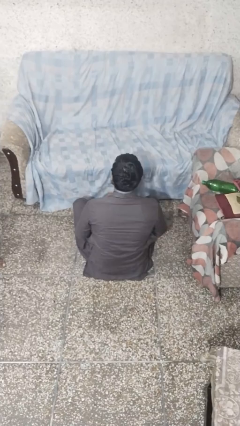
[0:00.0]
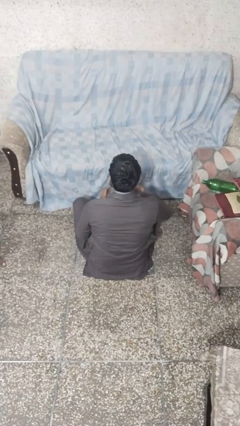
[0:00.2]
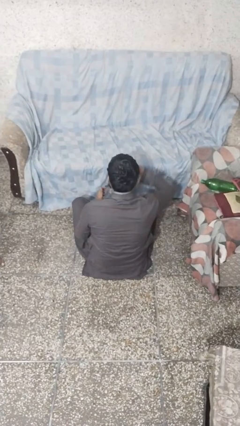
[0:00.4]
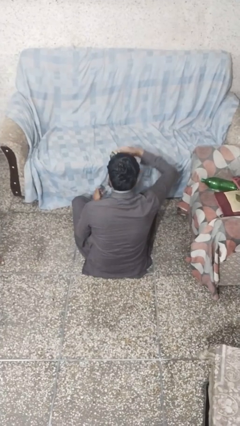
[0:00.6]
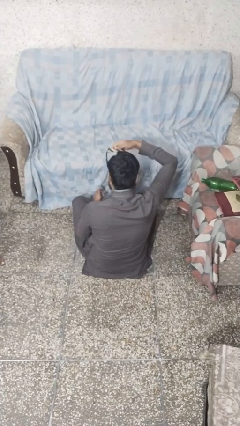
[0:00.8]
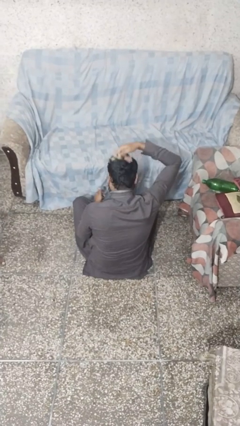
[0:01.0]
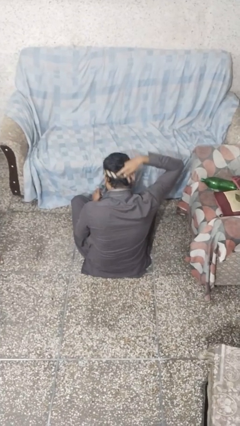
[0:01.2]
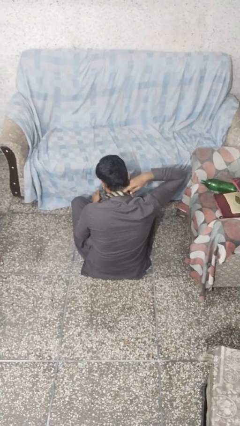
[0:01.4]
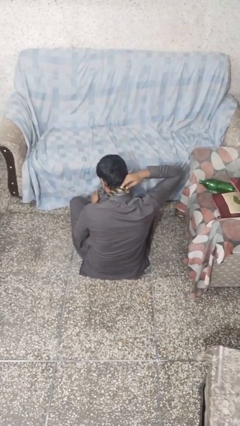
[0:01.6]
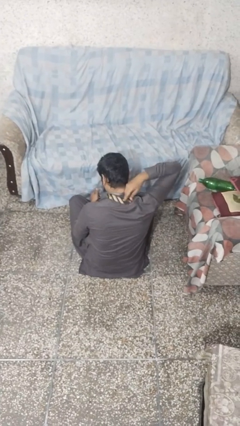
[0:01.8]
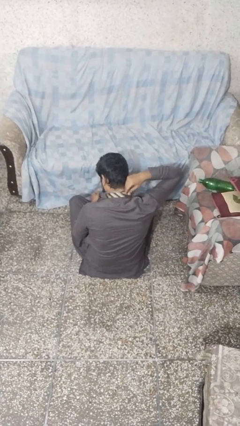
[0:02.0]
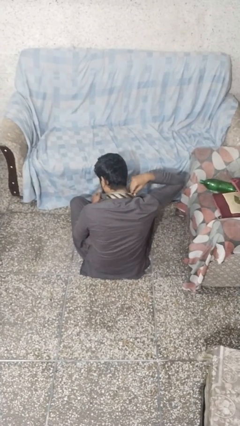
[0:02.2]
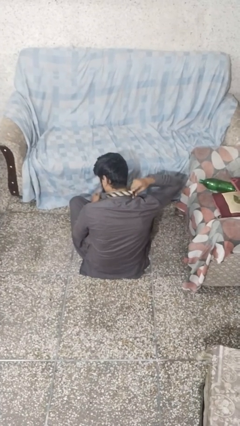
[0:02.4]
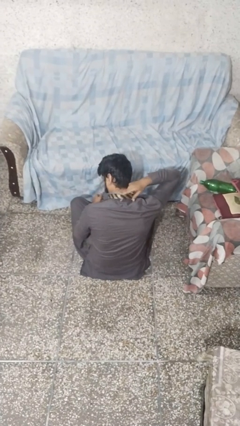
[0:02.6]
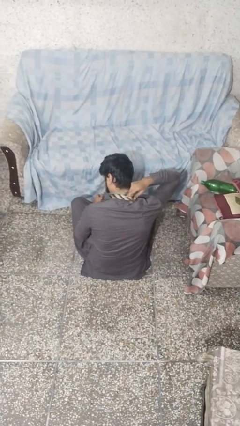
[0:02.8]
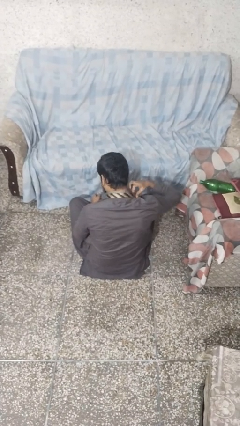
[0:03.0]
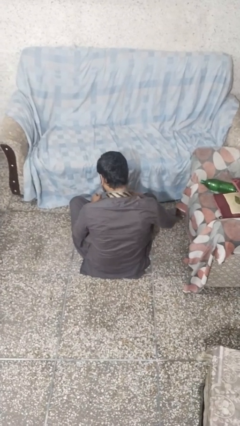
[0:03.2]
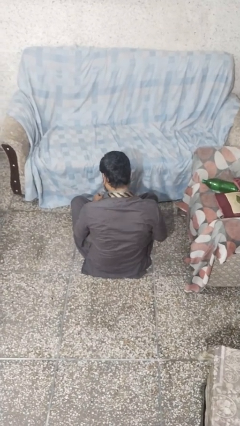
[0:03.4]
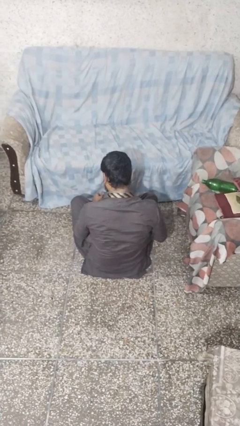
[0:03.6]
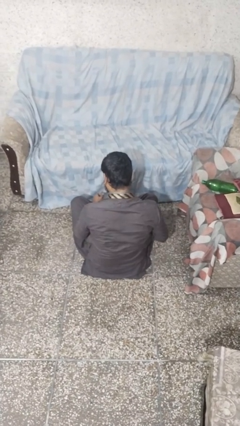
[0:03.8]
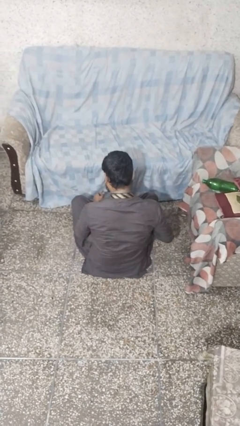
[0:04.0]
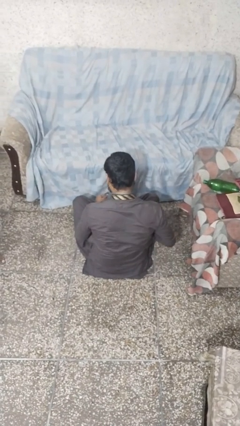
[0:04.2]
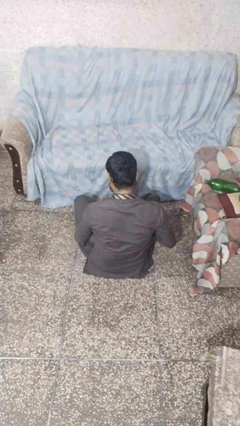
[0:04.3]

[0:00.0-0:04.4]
person puts on necktie

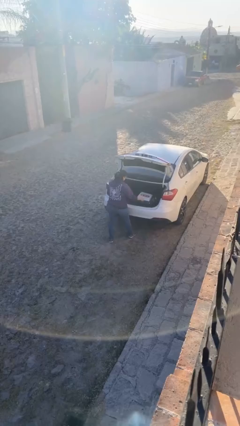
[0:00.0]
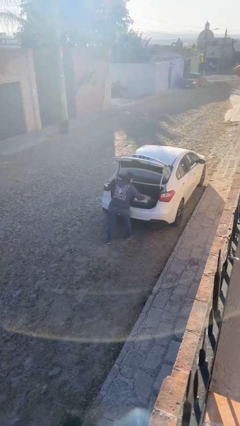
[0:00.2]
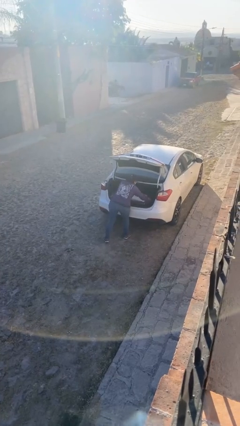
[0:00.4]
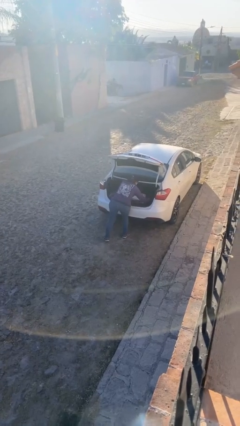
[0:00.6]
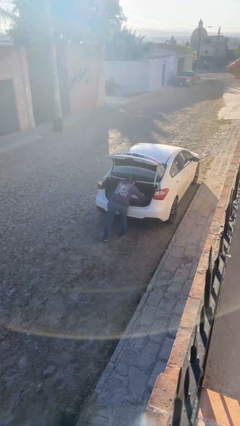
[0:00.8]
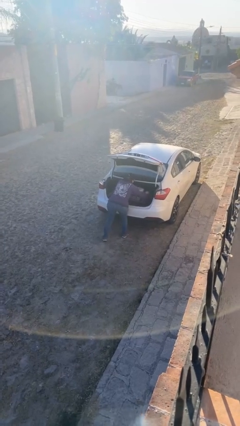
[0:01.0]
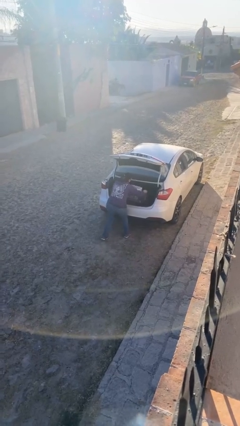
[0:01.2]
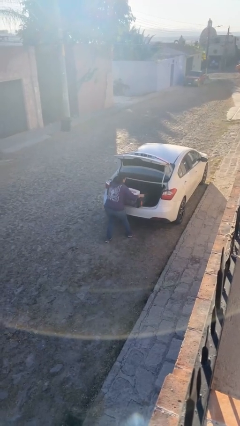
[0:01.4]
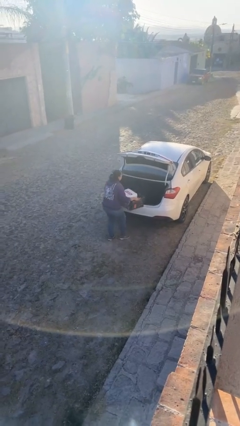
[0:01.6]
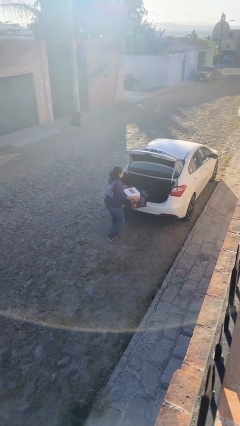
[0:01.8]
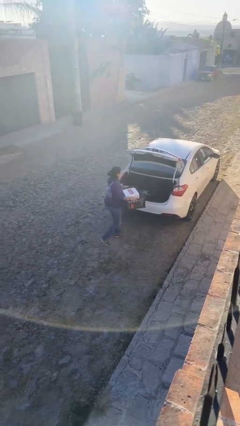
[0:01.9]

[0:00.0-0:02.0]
person unloads car

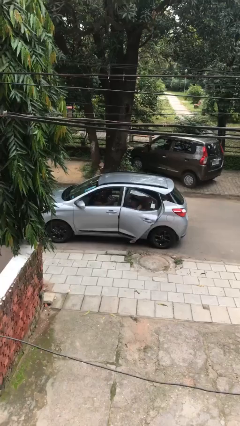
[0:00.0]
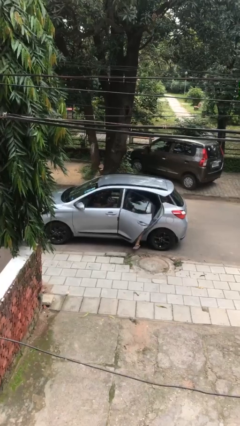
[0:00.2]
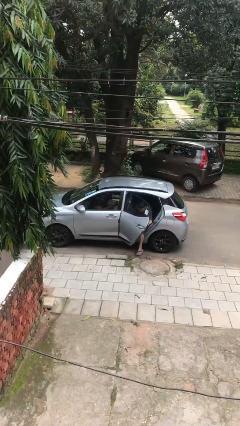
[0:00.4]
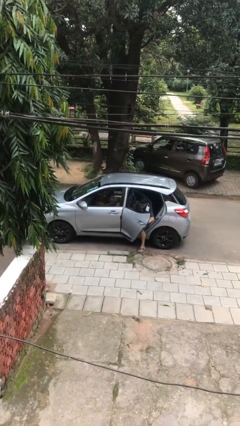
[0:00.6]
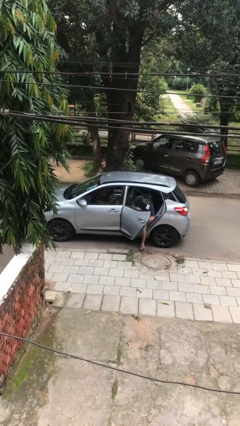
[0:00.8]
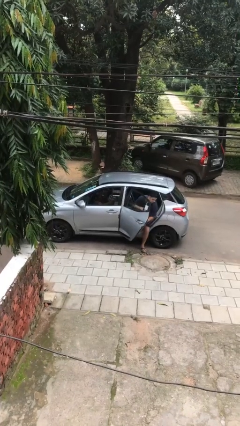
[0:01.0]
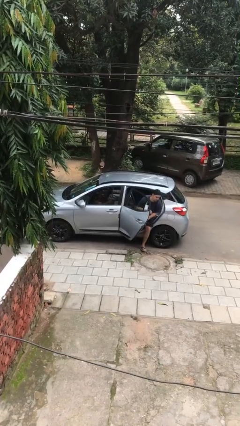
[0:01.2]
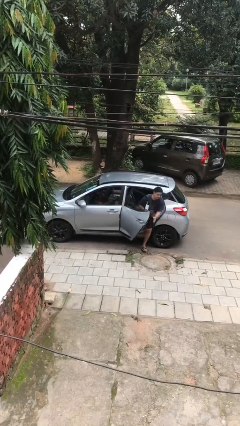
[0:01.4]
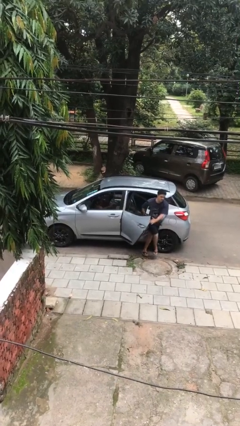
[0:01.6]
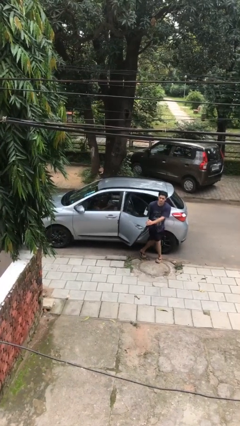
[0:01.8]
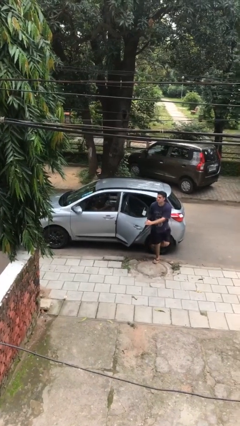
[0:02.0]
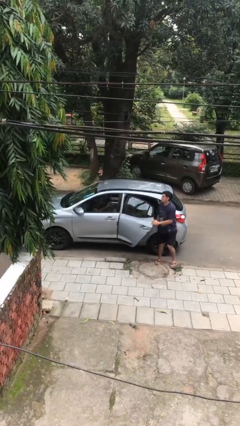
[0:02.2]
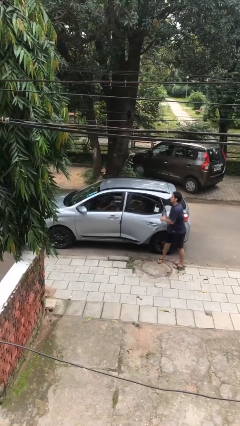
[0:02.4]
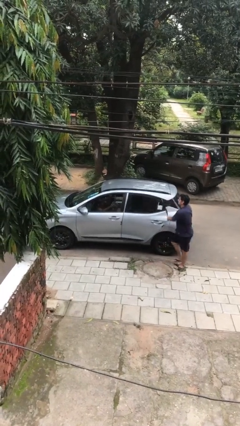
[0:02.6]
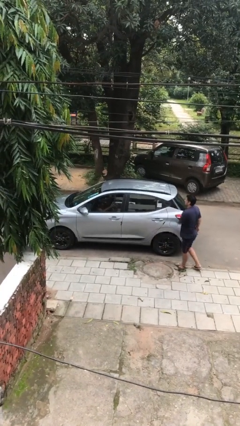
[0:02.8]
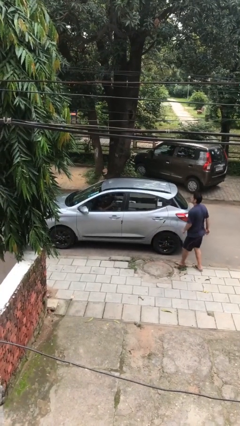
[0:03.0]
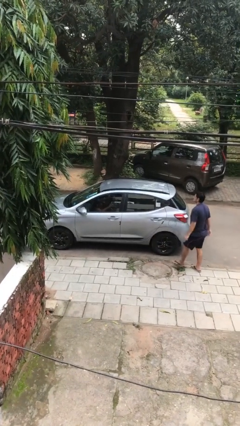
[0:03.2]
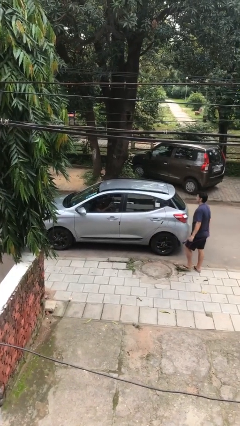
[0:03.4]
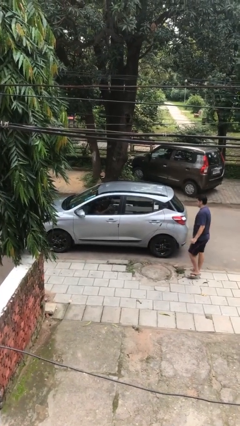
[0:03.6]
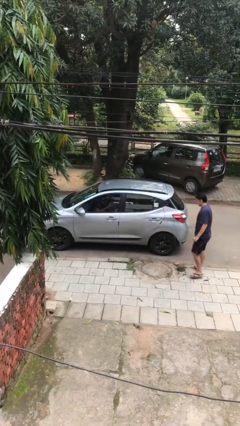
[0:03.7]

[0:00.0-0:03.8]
car drops off person

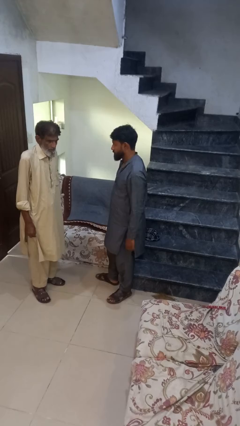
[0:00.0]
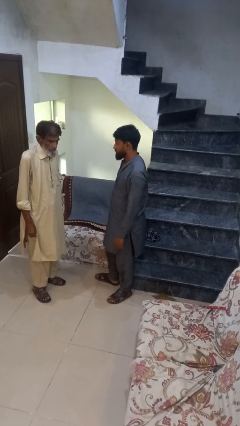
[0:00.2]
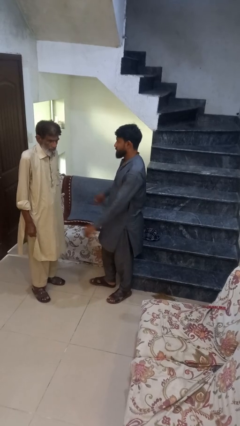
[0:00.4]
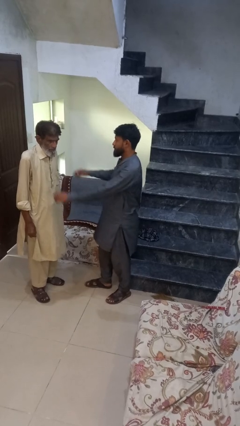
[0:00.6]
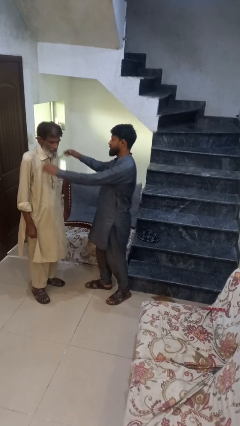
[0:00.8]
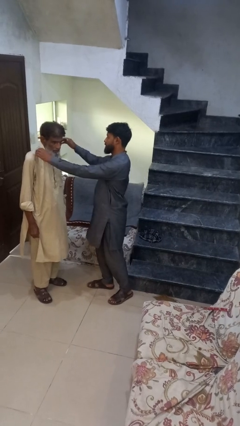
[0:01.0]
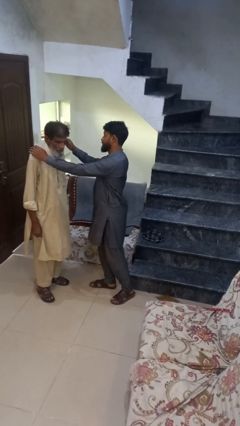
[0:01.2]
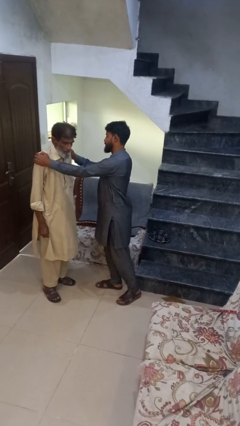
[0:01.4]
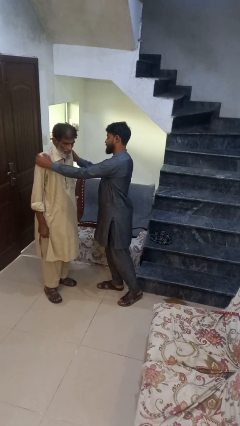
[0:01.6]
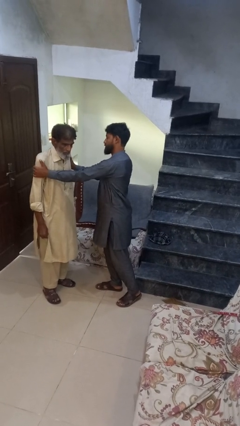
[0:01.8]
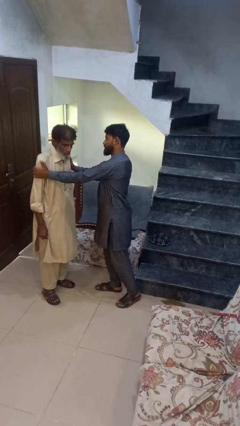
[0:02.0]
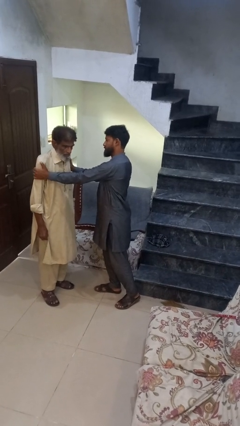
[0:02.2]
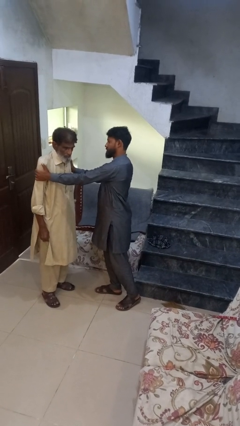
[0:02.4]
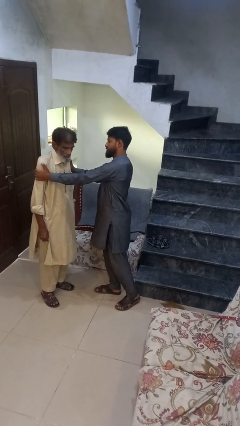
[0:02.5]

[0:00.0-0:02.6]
person pounds shoulders of person

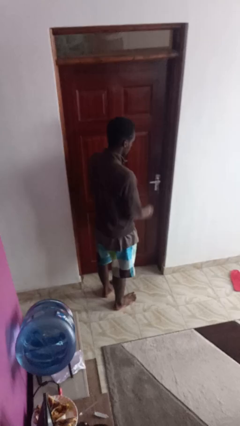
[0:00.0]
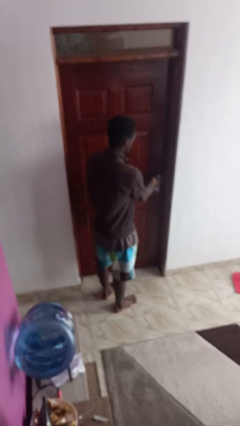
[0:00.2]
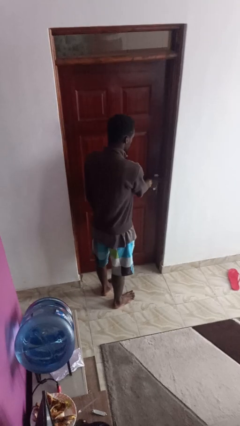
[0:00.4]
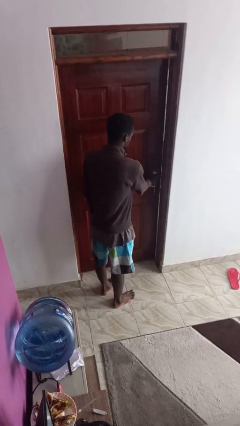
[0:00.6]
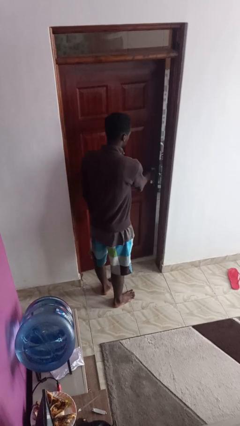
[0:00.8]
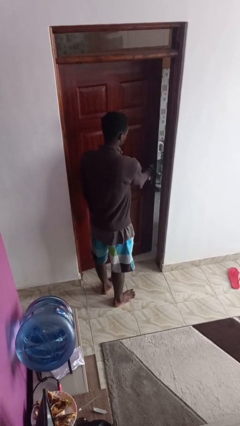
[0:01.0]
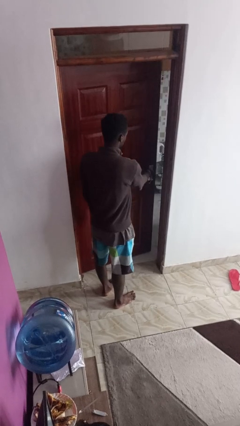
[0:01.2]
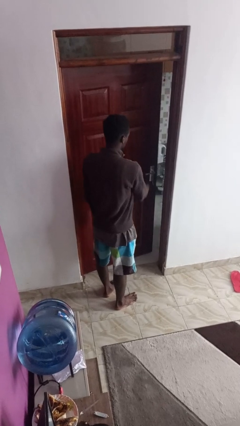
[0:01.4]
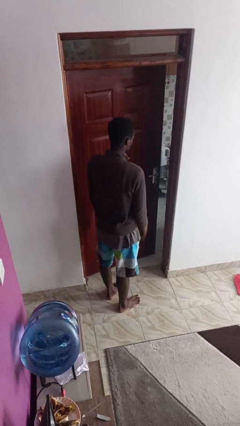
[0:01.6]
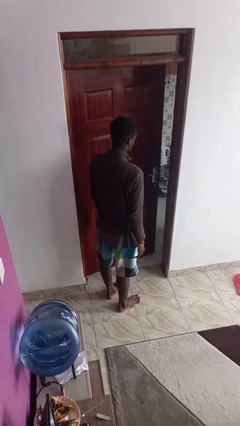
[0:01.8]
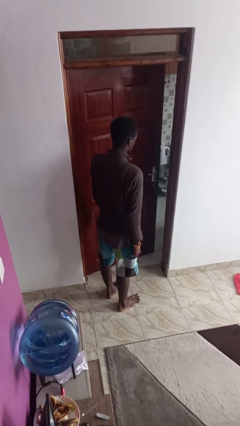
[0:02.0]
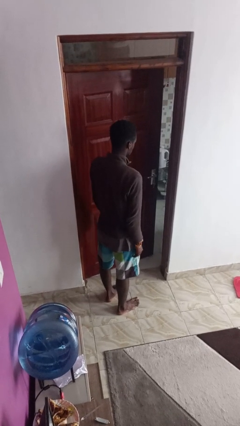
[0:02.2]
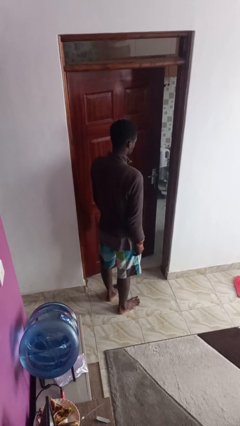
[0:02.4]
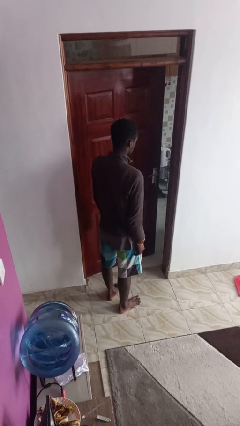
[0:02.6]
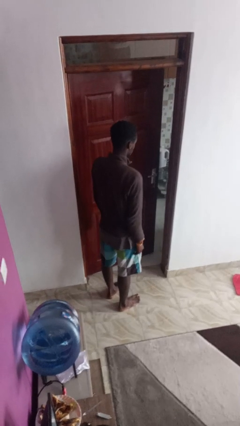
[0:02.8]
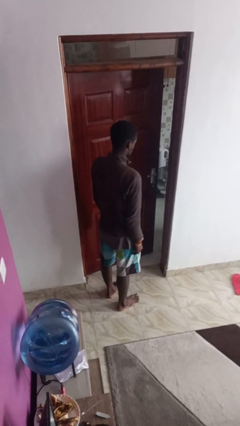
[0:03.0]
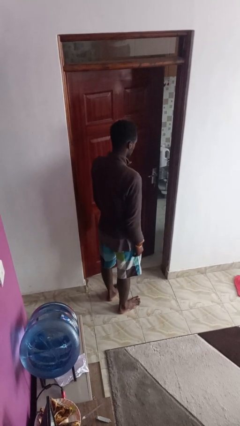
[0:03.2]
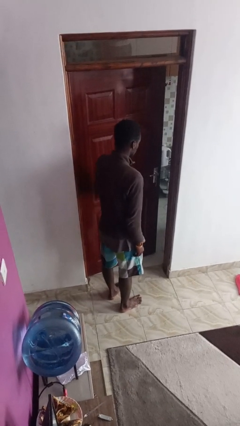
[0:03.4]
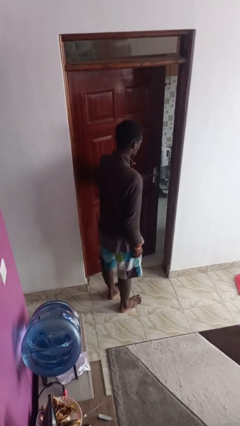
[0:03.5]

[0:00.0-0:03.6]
person opens facility door

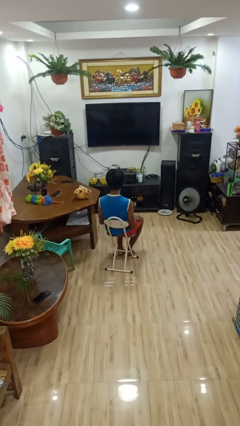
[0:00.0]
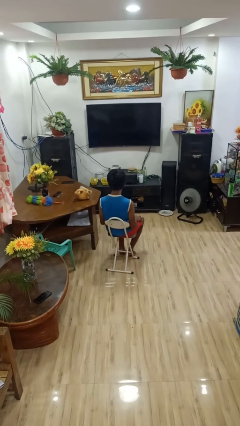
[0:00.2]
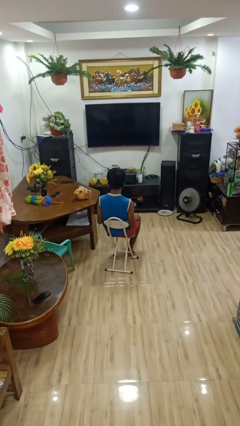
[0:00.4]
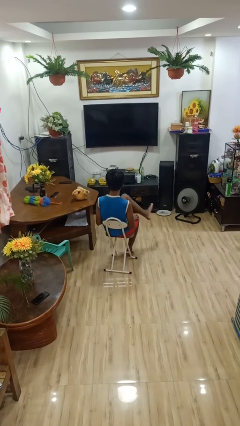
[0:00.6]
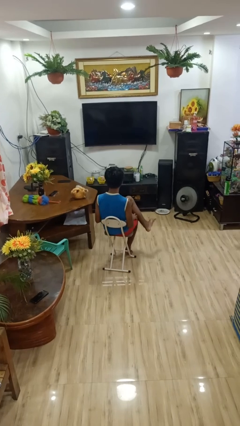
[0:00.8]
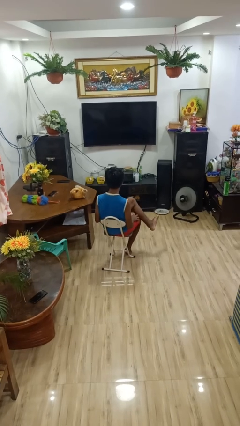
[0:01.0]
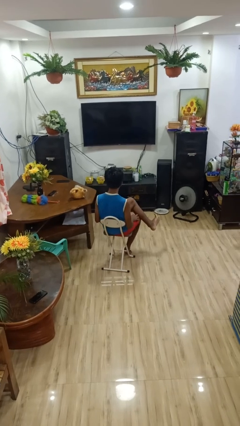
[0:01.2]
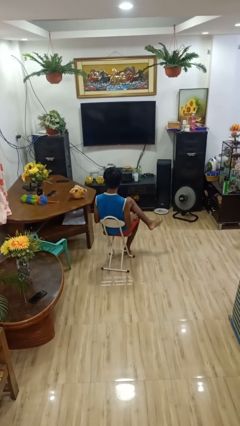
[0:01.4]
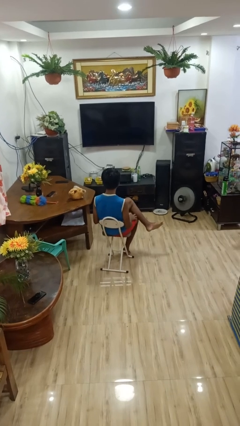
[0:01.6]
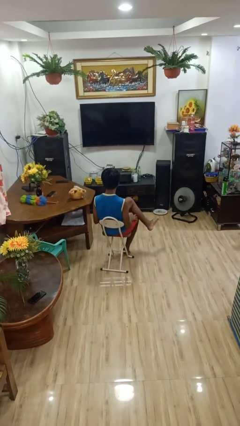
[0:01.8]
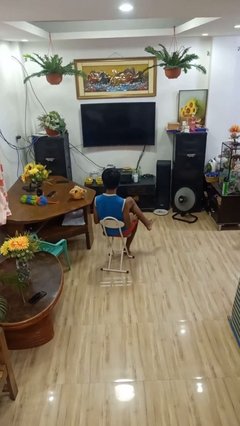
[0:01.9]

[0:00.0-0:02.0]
person crosses legs
